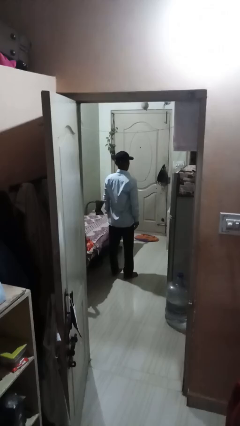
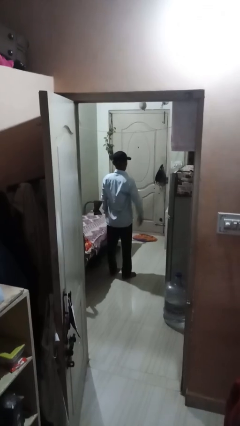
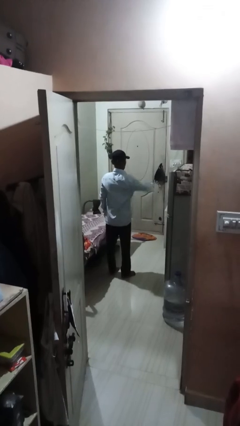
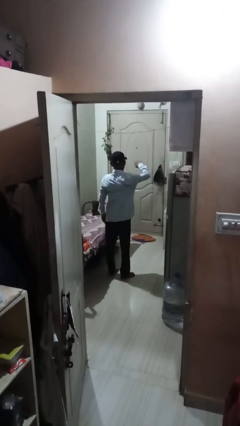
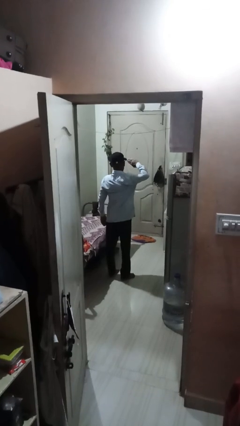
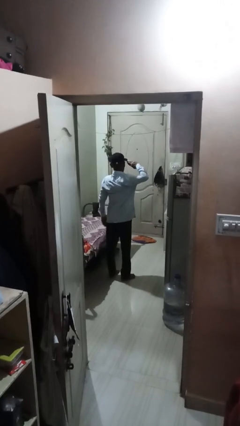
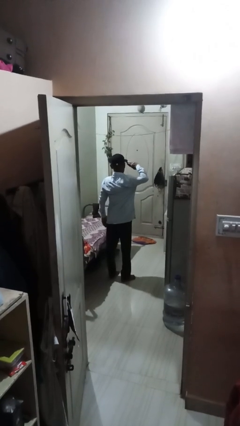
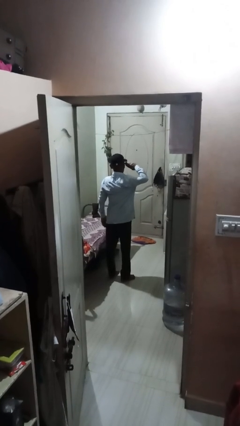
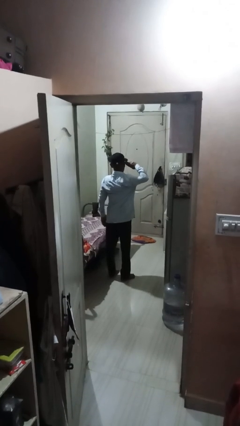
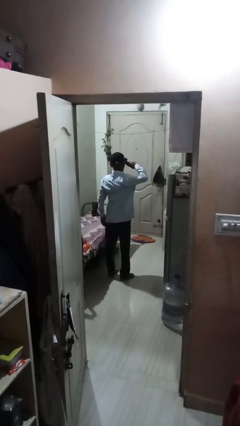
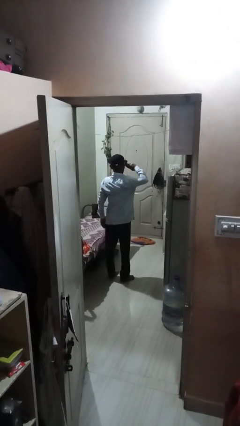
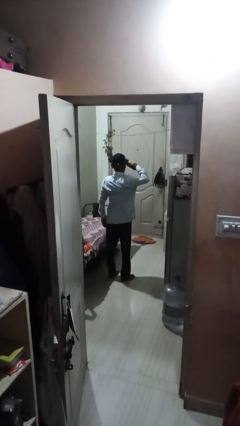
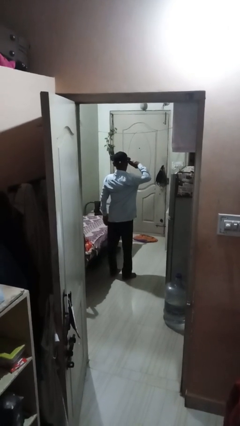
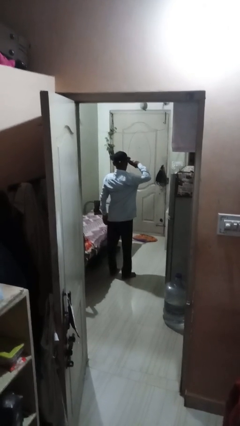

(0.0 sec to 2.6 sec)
person salutes

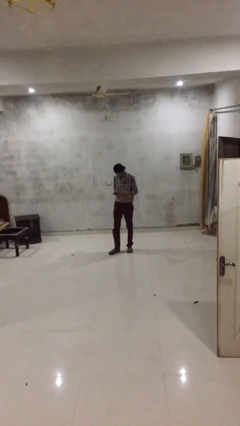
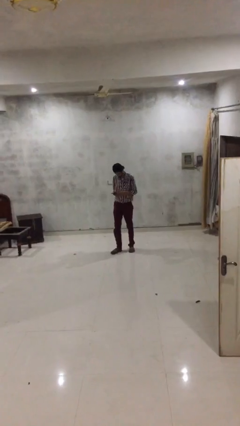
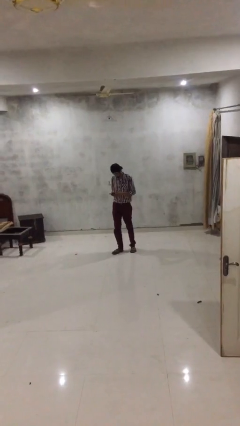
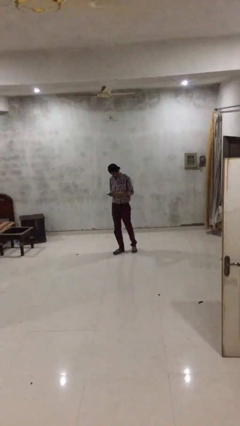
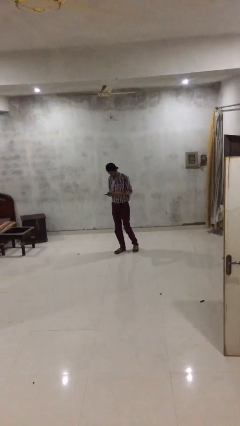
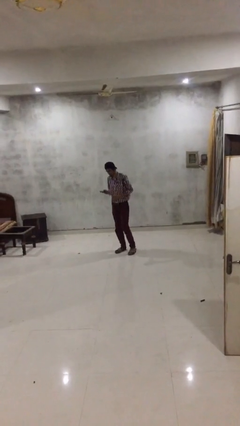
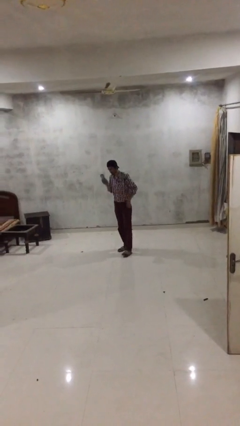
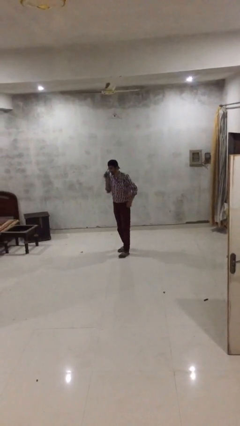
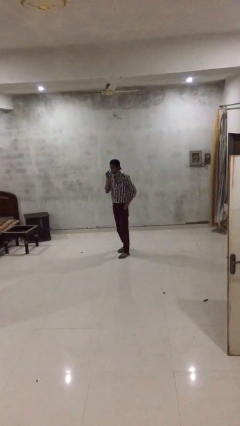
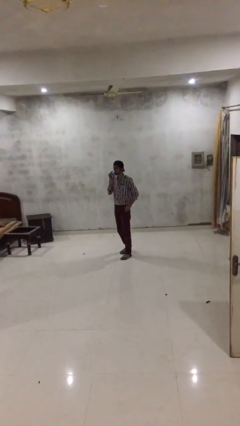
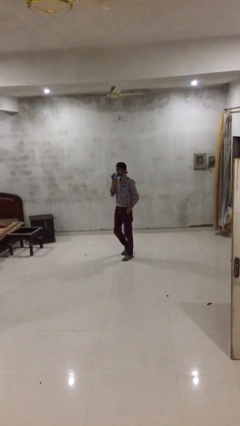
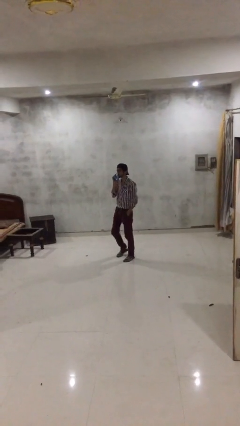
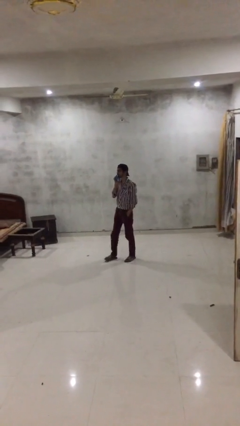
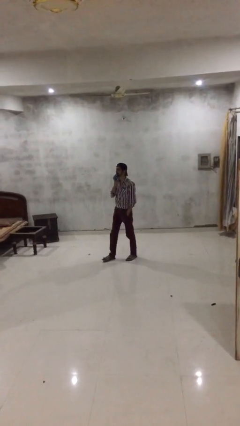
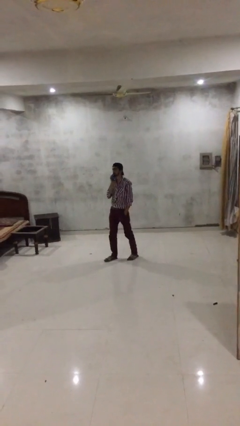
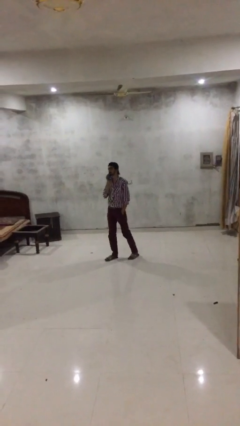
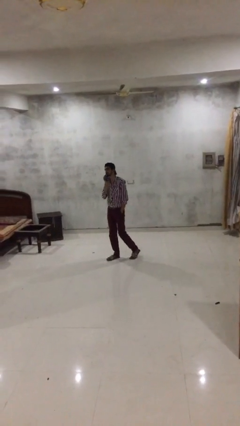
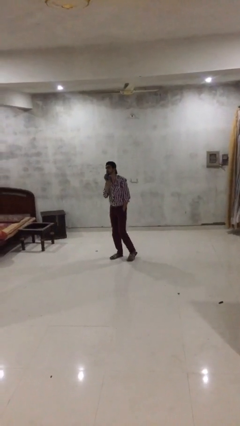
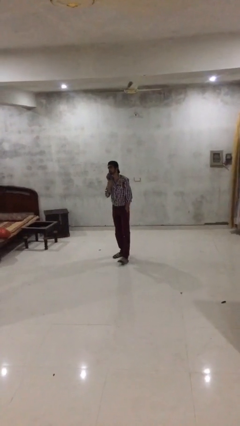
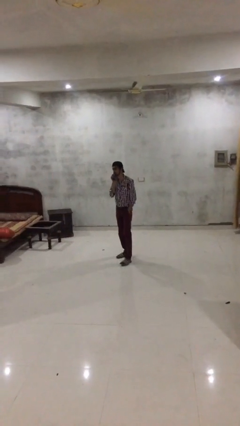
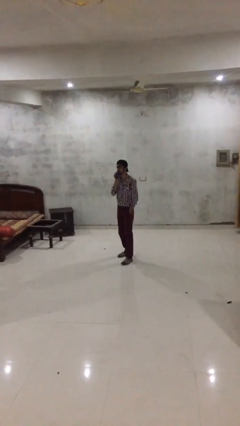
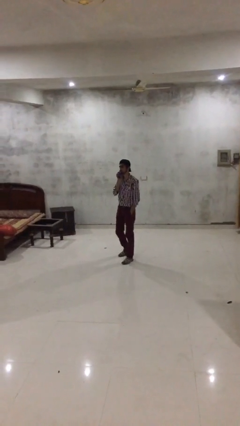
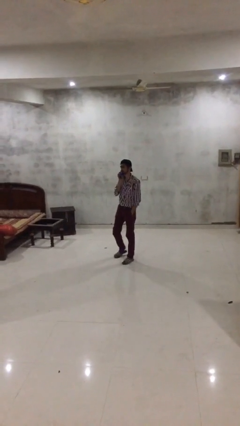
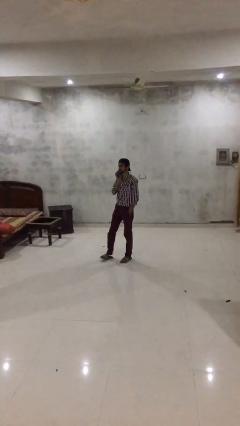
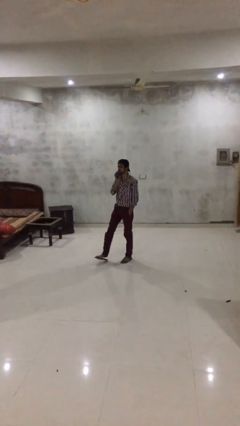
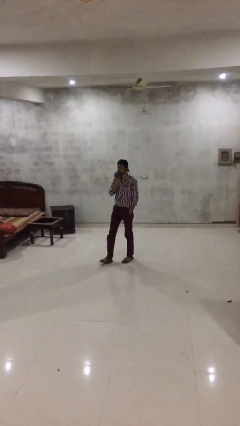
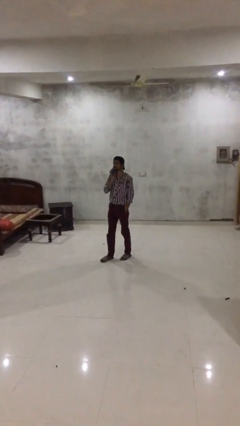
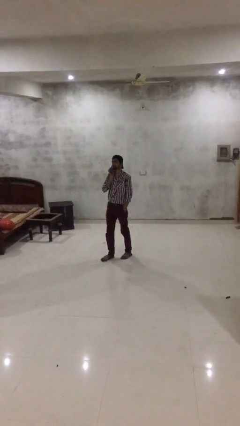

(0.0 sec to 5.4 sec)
person talks on phone

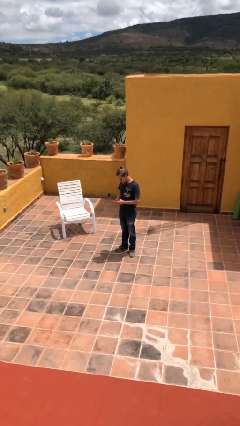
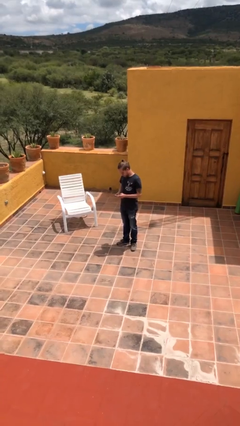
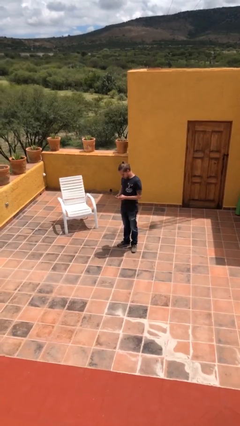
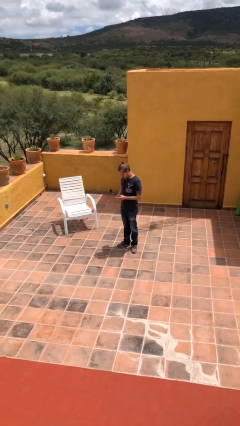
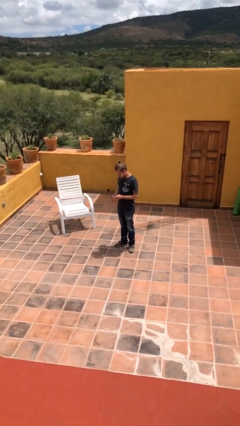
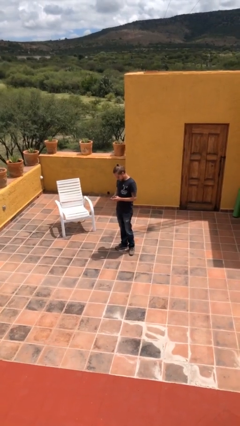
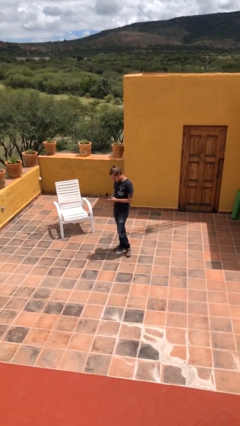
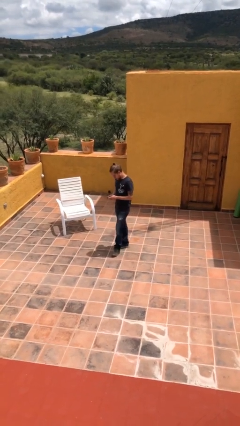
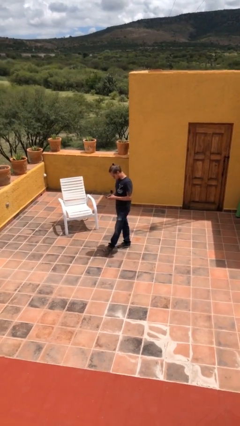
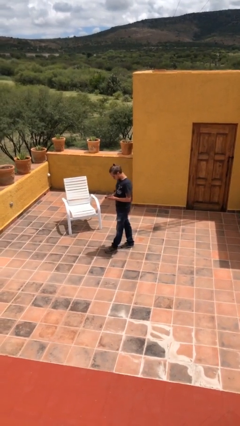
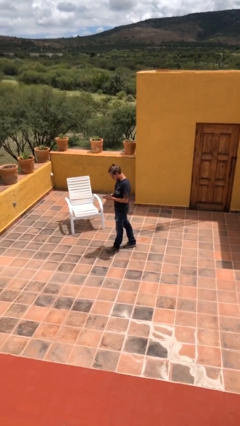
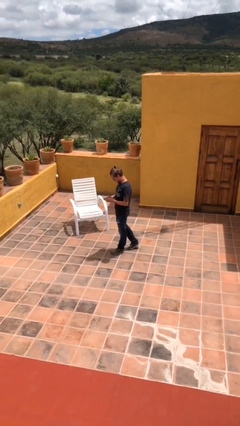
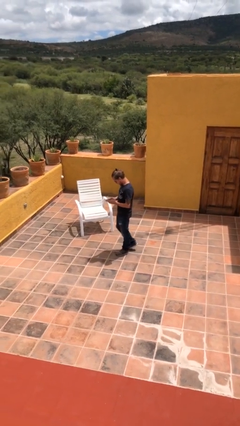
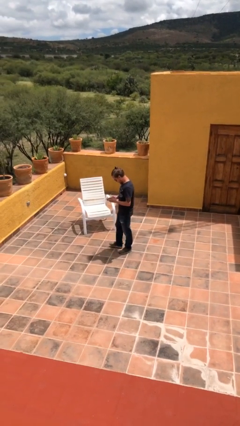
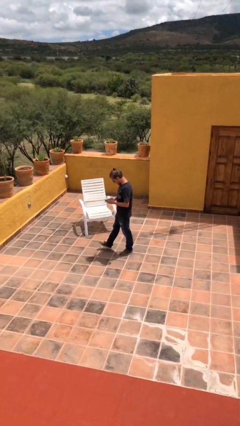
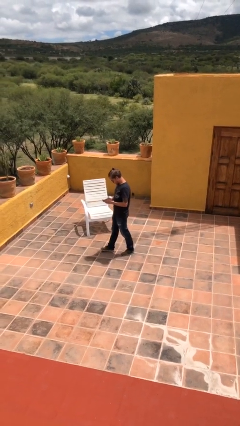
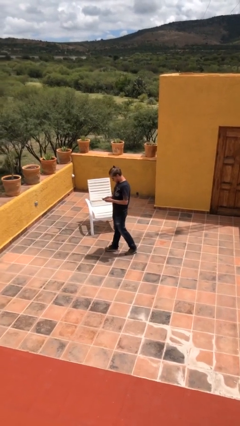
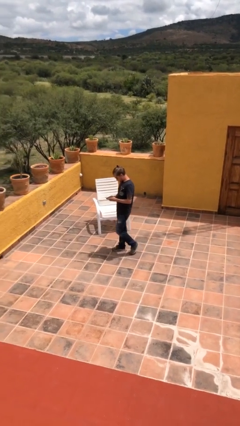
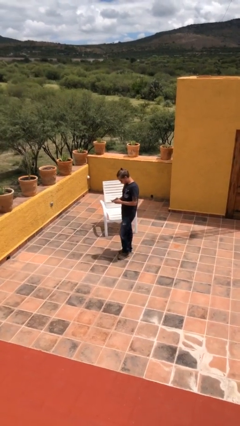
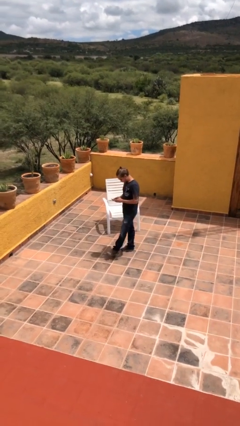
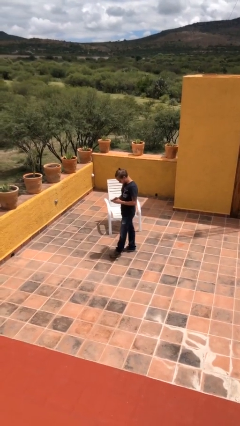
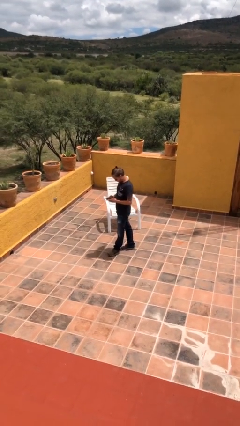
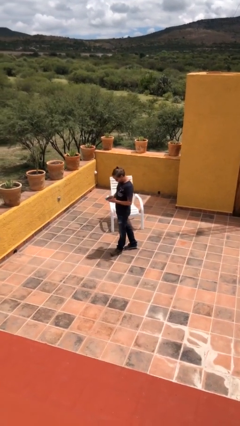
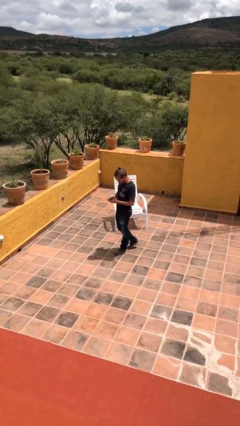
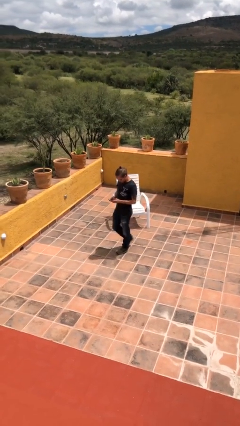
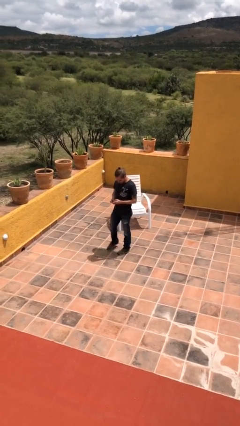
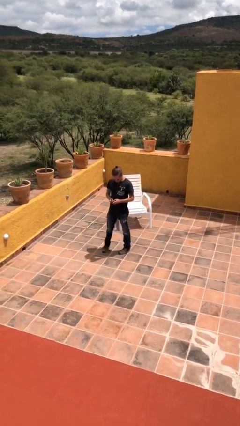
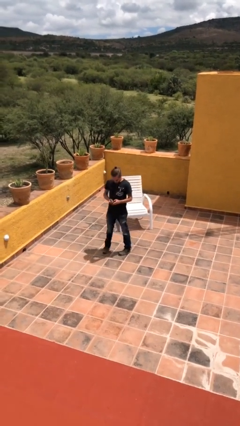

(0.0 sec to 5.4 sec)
person texts on phone

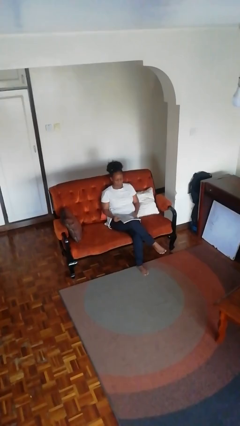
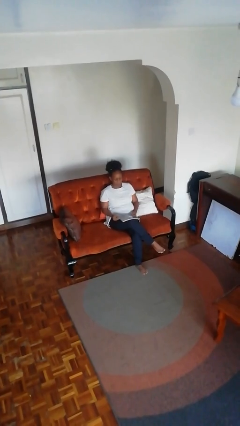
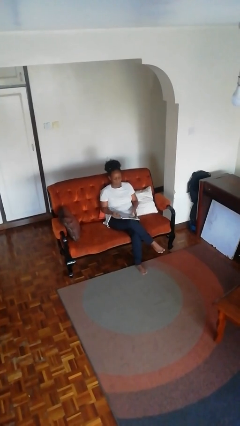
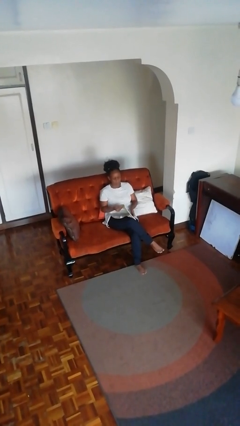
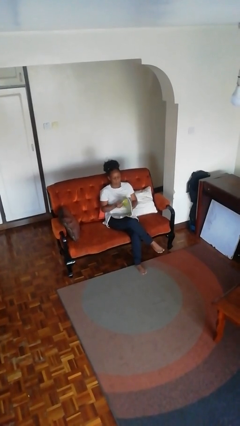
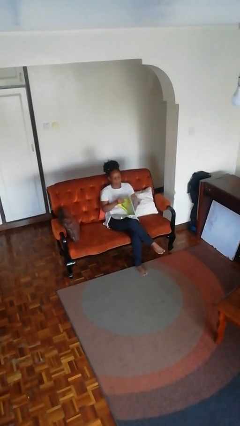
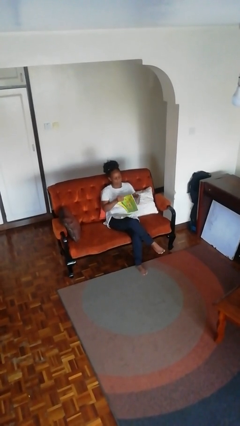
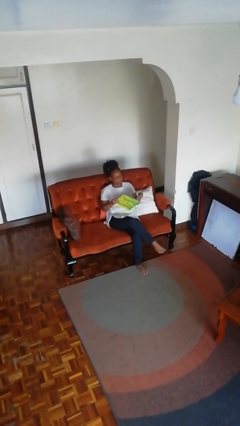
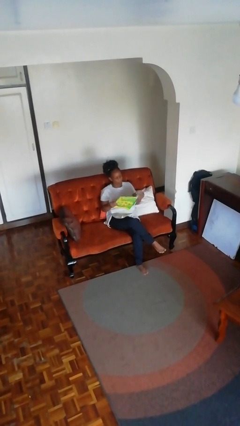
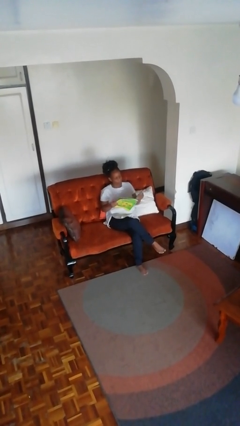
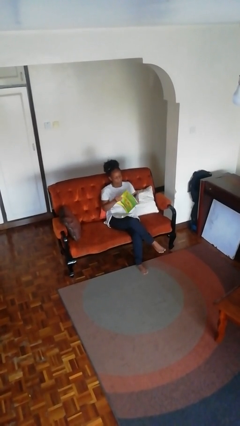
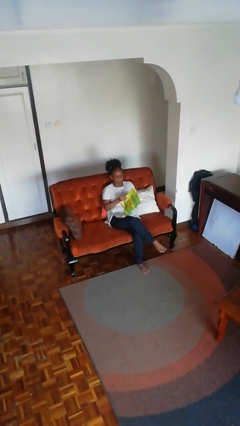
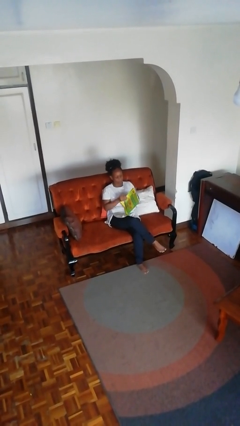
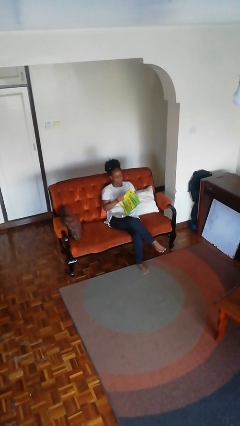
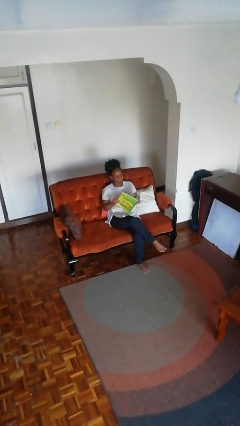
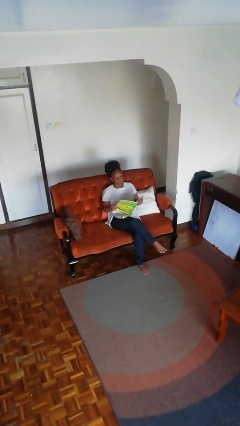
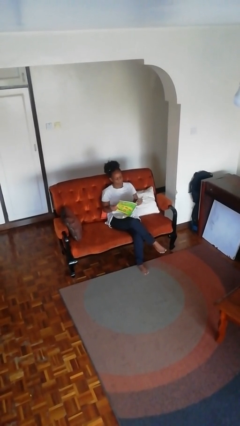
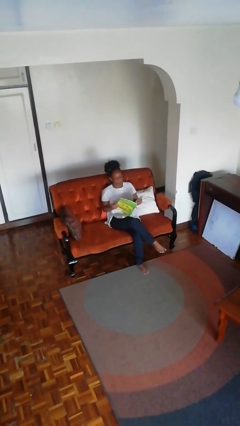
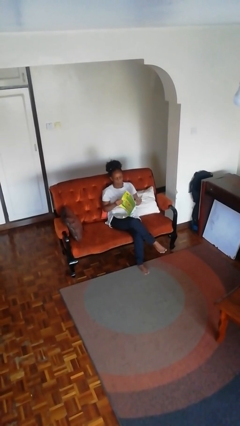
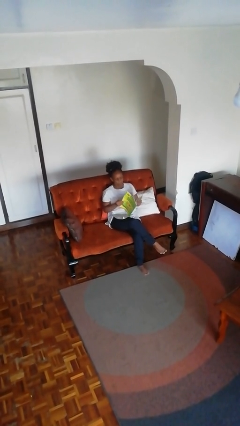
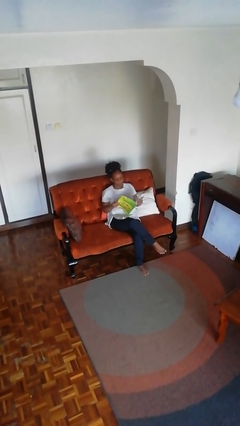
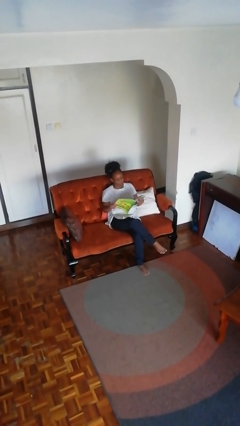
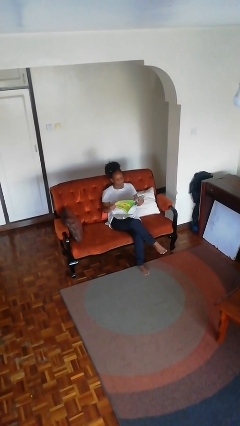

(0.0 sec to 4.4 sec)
person reads magazine

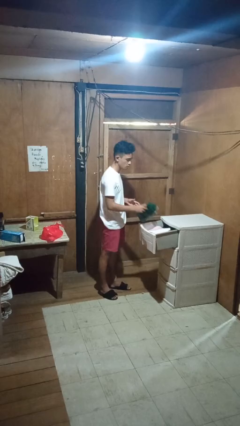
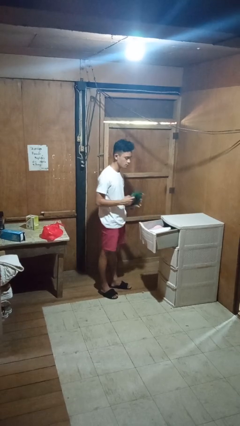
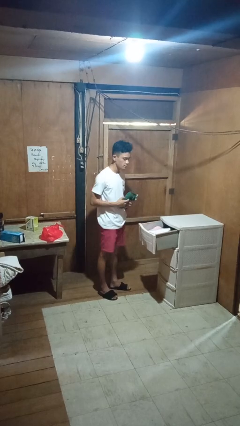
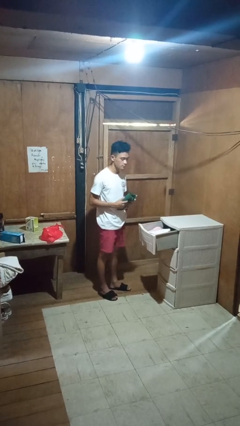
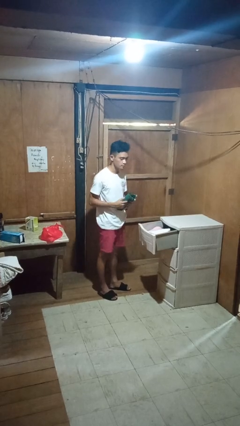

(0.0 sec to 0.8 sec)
person takes clothes from dresser
